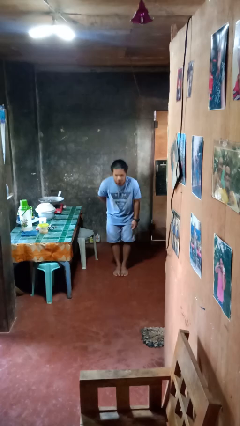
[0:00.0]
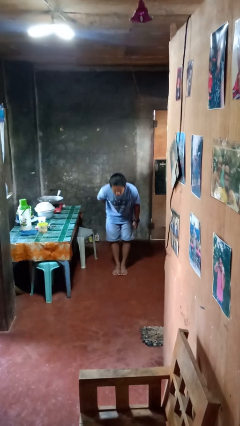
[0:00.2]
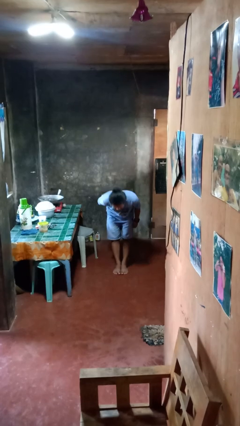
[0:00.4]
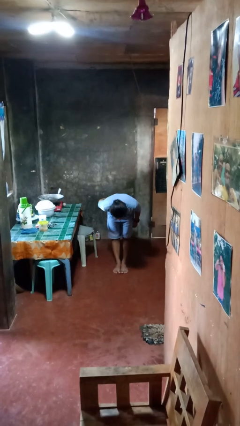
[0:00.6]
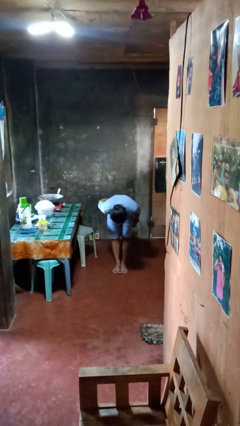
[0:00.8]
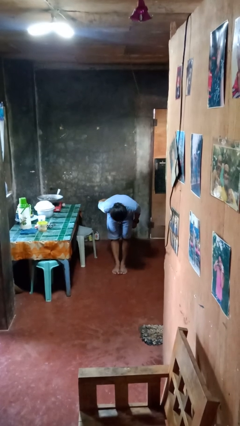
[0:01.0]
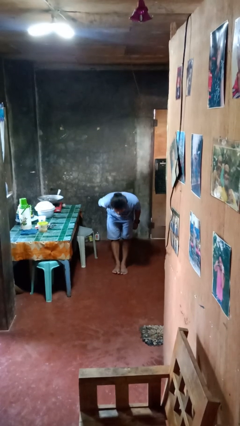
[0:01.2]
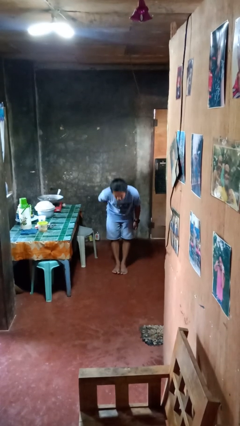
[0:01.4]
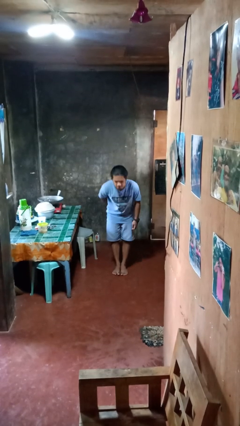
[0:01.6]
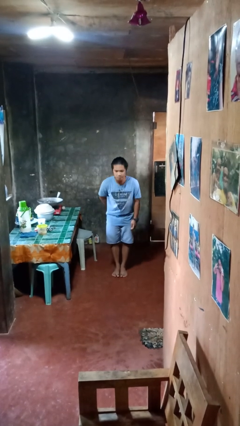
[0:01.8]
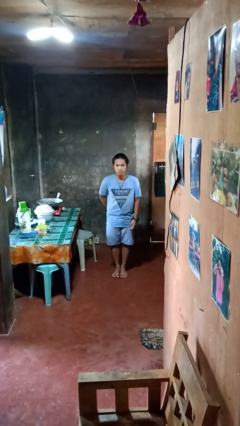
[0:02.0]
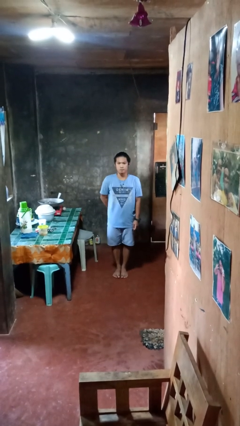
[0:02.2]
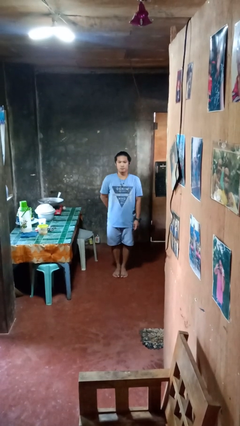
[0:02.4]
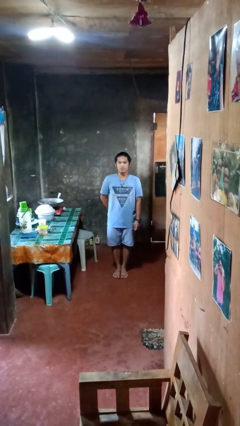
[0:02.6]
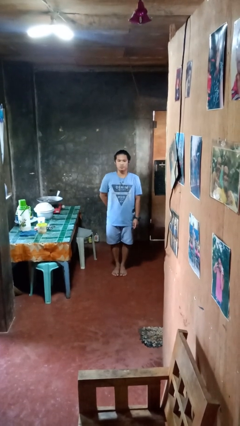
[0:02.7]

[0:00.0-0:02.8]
person bows

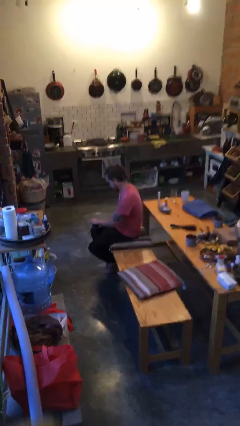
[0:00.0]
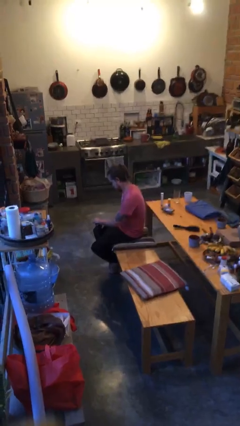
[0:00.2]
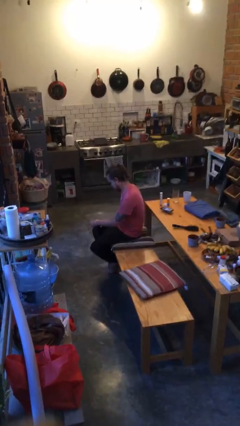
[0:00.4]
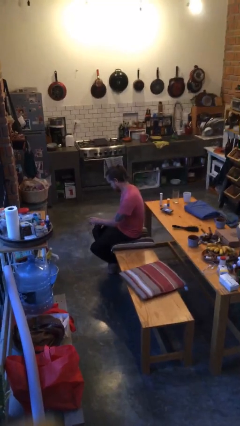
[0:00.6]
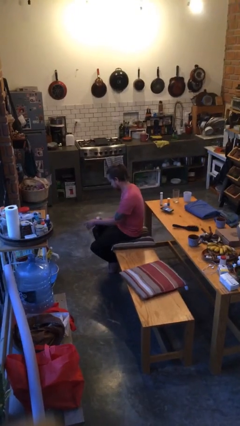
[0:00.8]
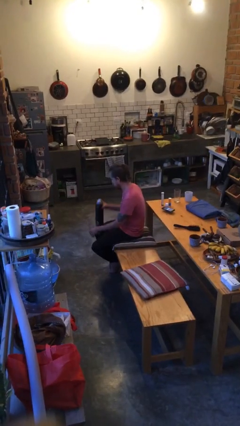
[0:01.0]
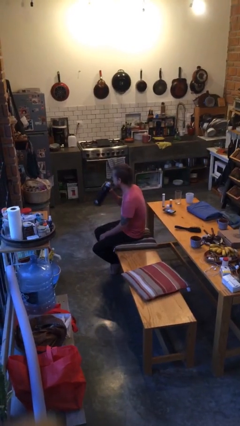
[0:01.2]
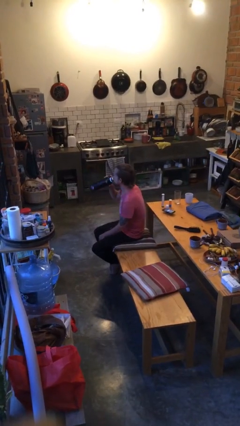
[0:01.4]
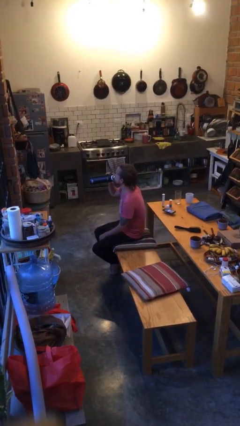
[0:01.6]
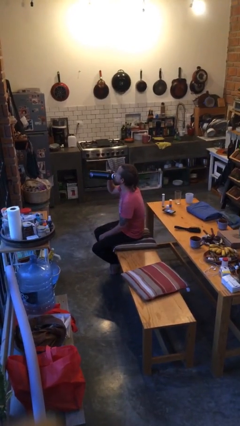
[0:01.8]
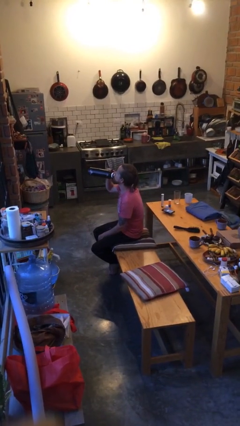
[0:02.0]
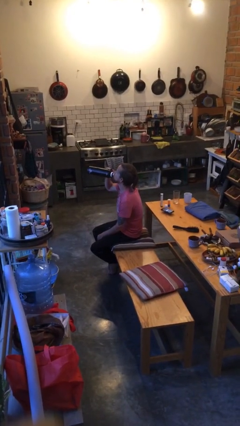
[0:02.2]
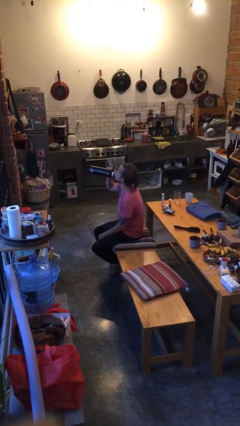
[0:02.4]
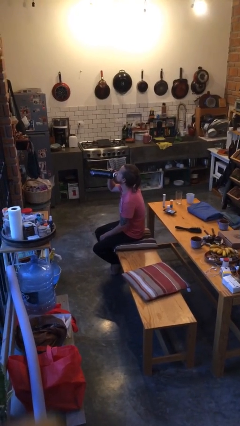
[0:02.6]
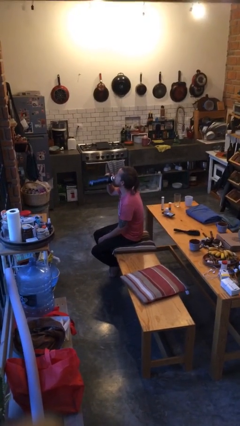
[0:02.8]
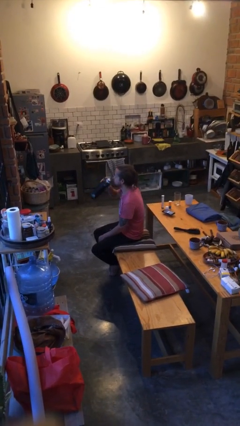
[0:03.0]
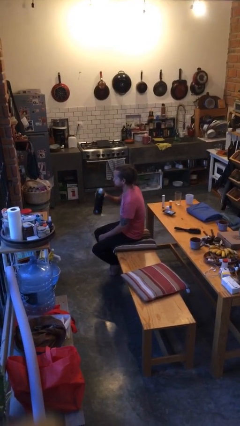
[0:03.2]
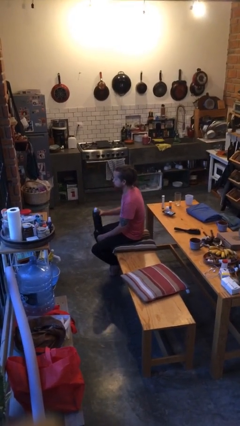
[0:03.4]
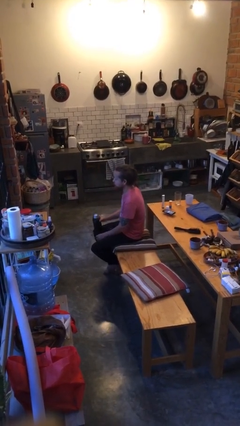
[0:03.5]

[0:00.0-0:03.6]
person drinks from bottle

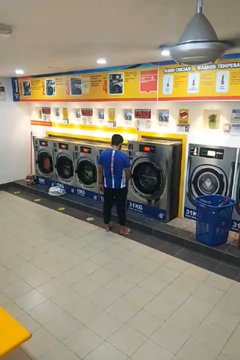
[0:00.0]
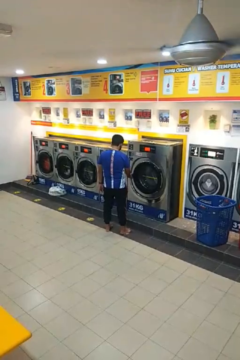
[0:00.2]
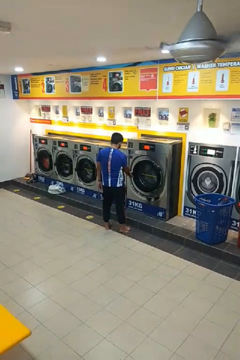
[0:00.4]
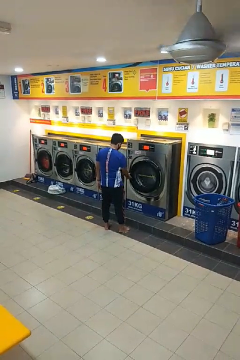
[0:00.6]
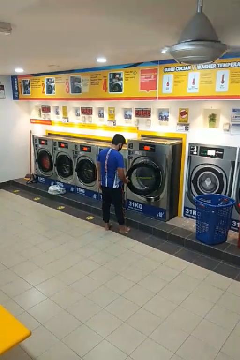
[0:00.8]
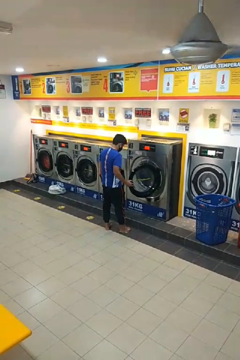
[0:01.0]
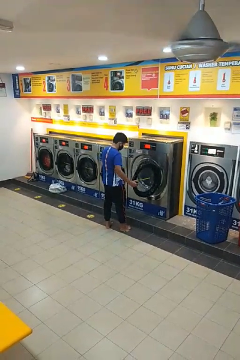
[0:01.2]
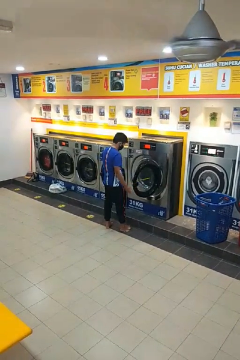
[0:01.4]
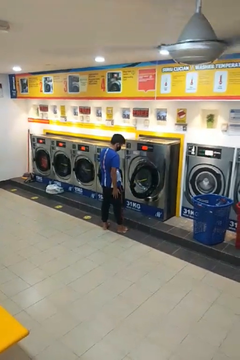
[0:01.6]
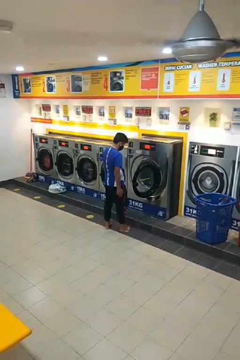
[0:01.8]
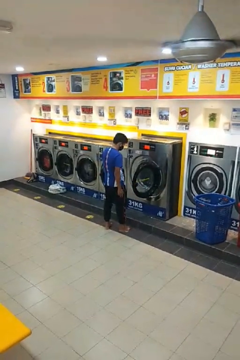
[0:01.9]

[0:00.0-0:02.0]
person opens clothes washer

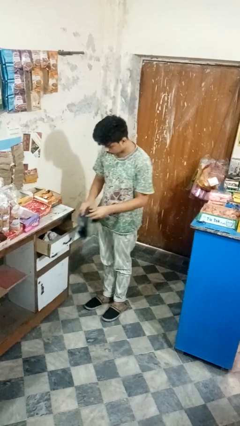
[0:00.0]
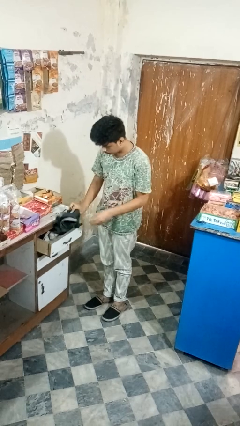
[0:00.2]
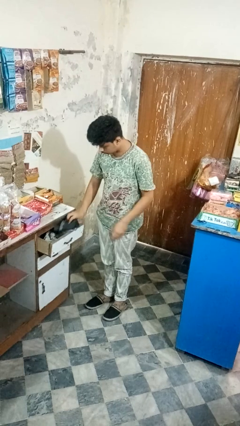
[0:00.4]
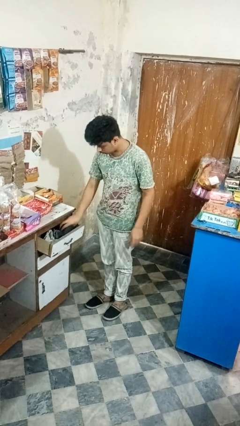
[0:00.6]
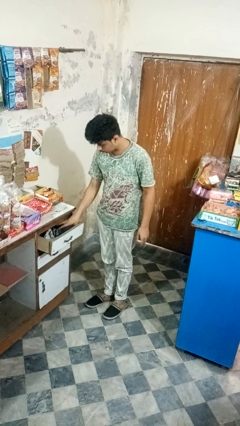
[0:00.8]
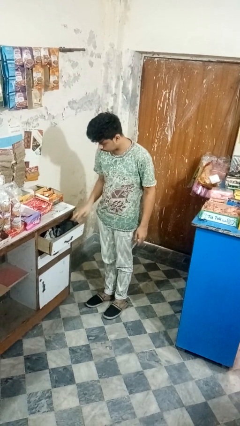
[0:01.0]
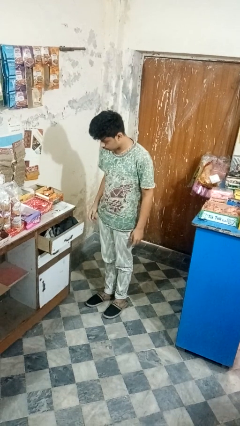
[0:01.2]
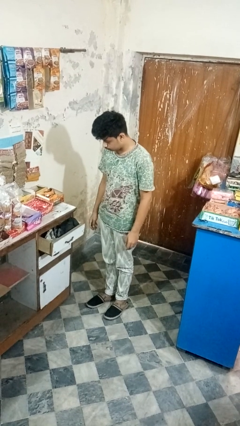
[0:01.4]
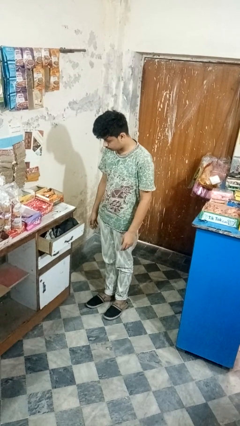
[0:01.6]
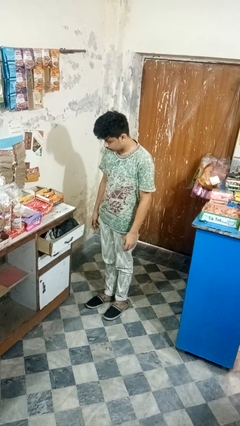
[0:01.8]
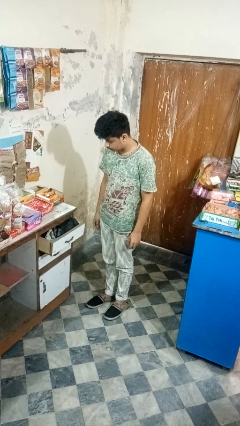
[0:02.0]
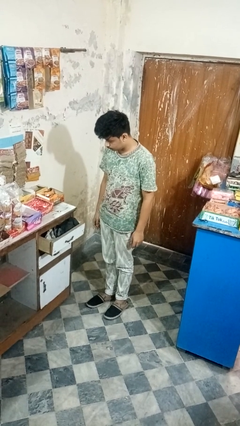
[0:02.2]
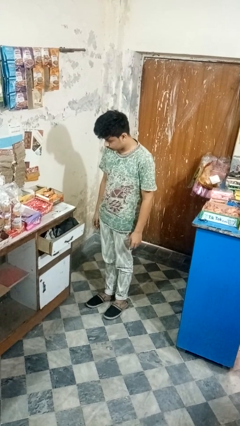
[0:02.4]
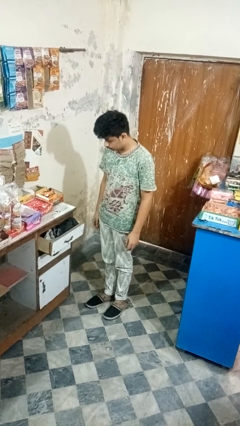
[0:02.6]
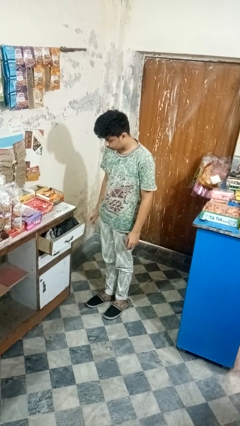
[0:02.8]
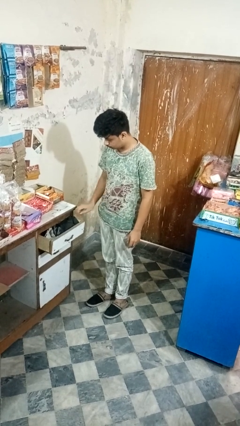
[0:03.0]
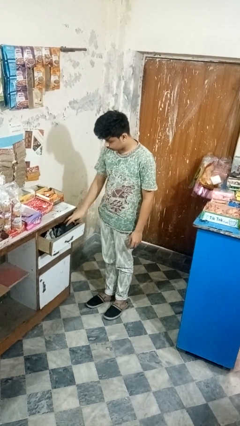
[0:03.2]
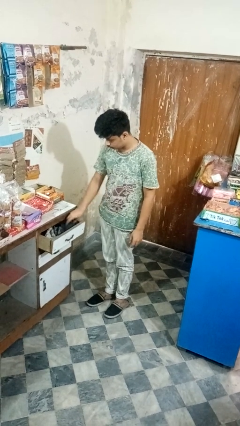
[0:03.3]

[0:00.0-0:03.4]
person puts clothes into dresser

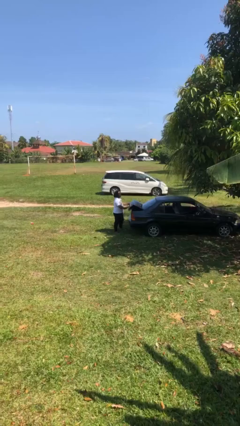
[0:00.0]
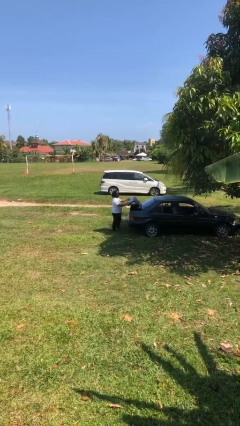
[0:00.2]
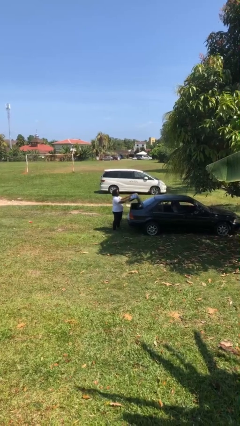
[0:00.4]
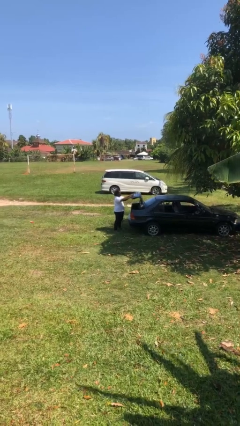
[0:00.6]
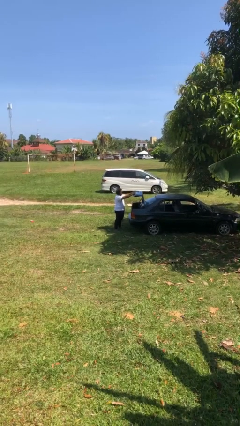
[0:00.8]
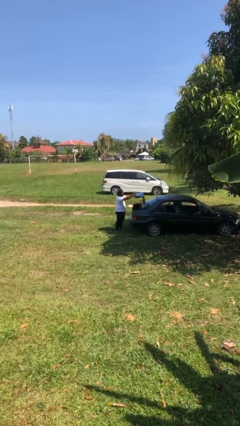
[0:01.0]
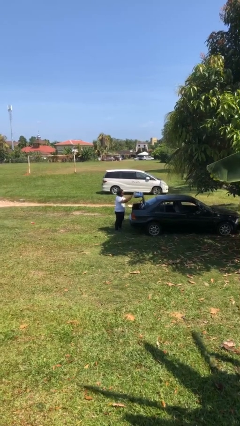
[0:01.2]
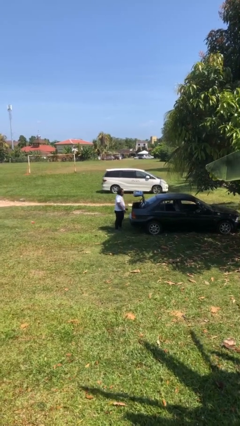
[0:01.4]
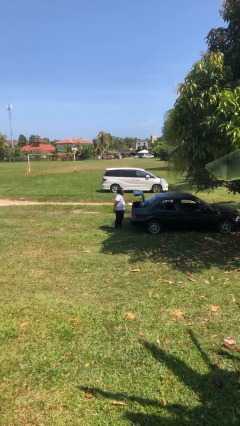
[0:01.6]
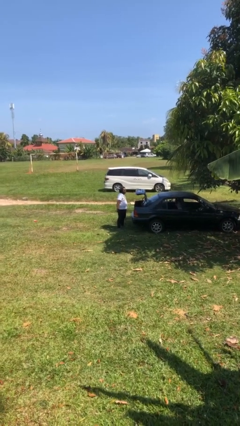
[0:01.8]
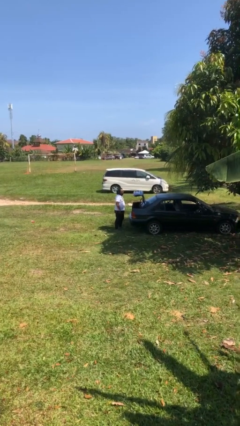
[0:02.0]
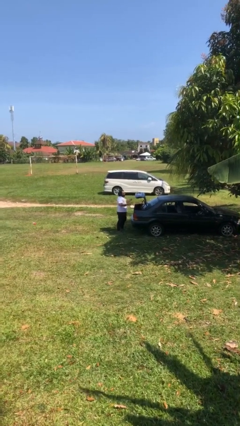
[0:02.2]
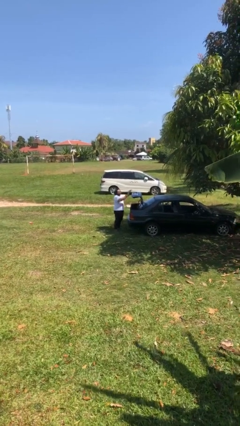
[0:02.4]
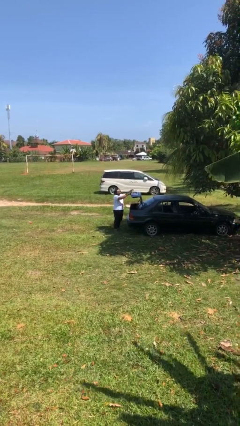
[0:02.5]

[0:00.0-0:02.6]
person opens car trunk

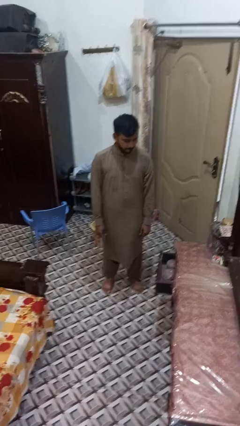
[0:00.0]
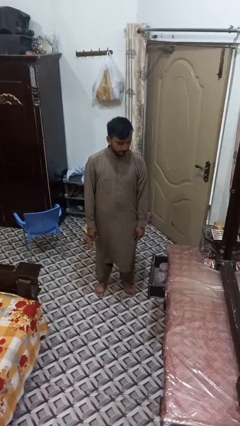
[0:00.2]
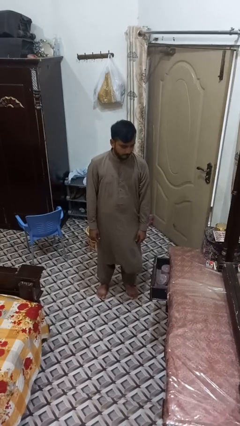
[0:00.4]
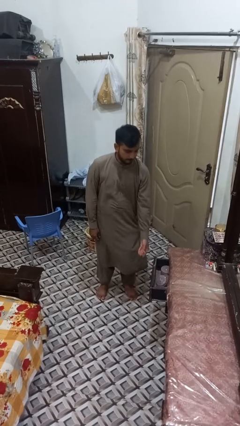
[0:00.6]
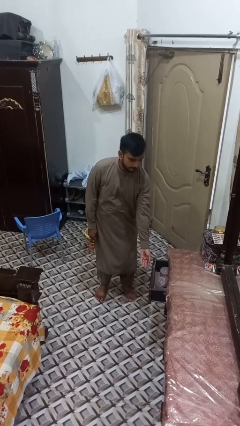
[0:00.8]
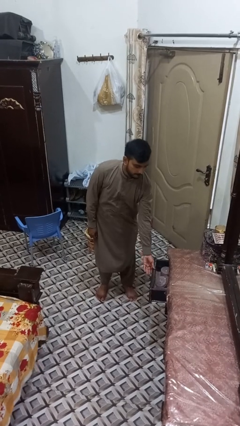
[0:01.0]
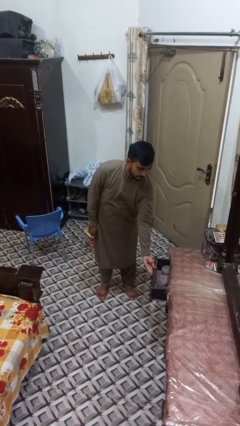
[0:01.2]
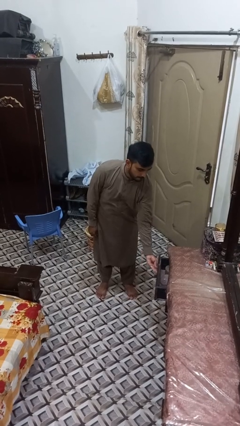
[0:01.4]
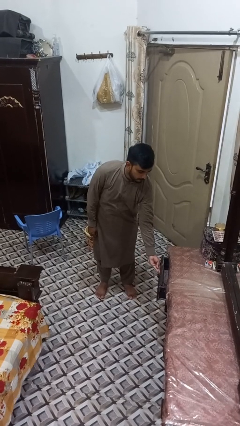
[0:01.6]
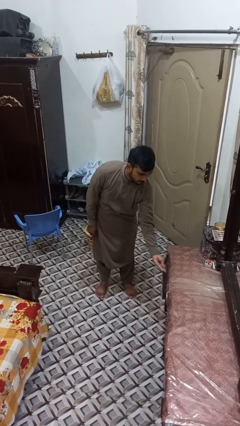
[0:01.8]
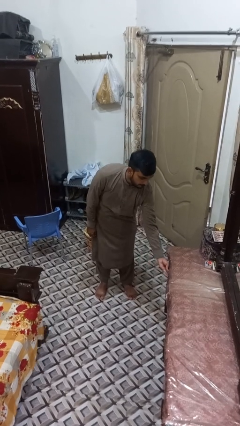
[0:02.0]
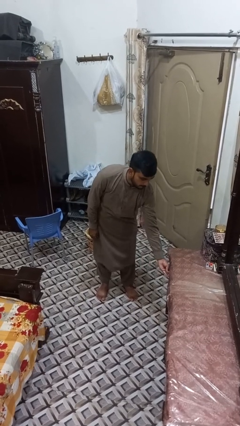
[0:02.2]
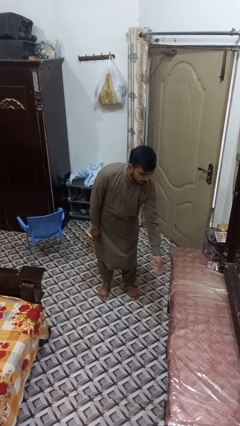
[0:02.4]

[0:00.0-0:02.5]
person closes dresser drawer

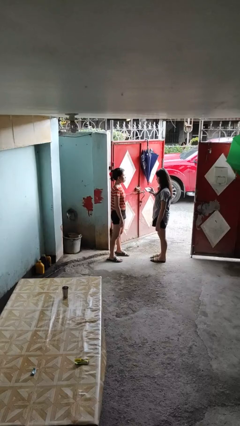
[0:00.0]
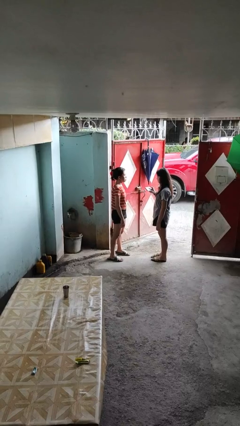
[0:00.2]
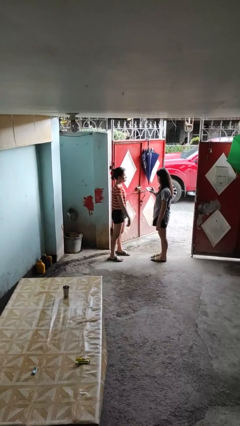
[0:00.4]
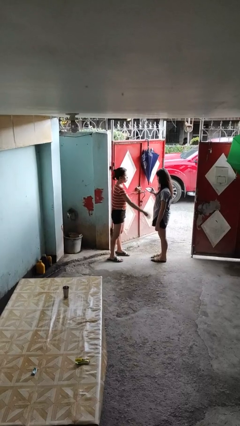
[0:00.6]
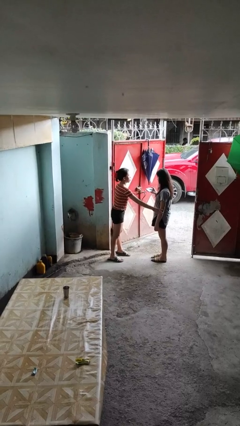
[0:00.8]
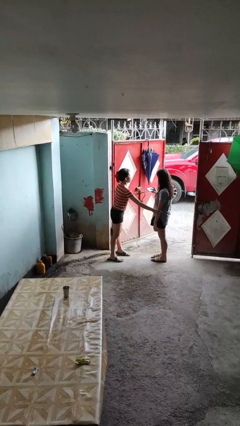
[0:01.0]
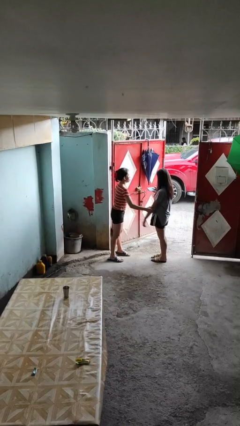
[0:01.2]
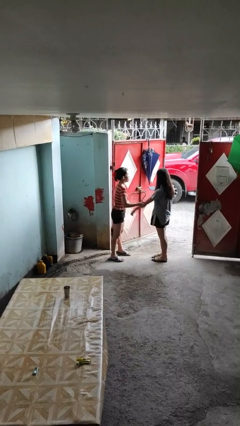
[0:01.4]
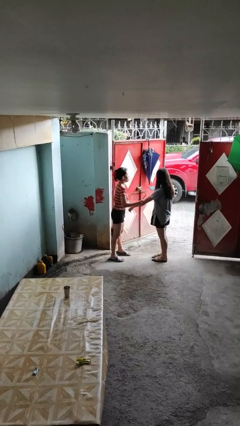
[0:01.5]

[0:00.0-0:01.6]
person grabs person by forearm
